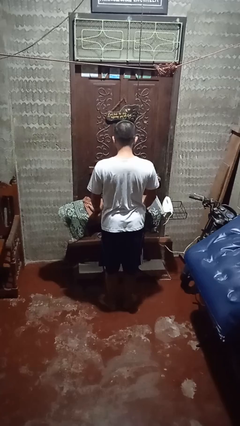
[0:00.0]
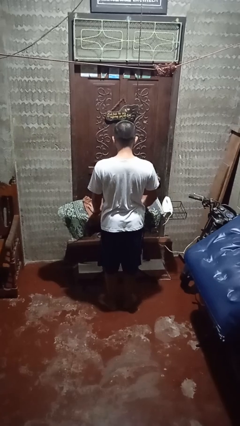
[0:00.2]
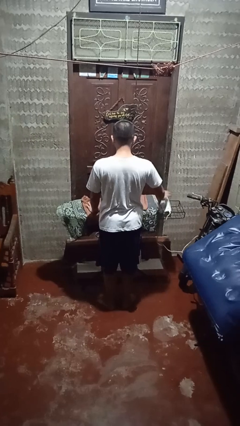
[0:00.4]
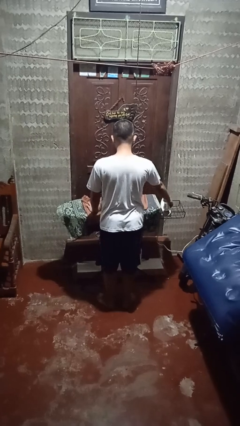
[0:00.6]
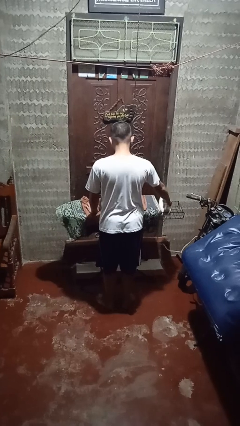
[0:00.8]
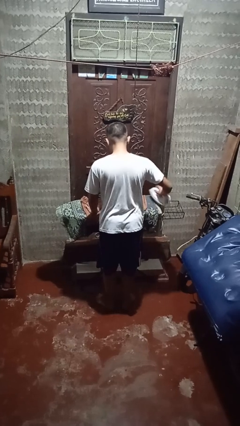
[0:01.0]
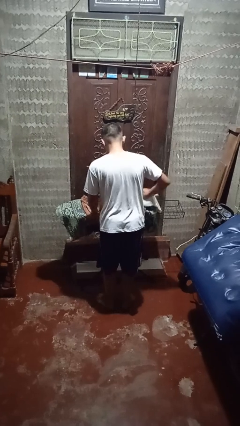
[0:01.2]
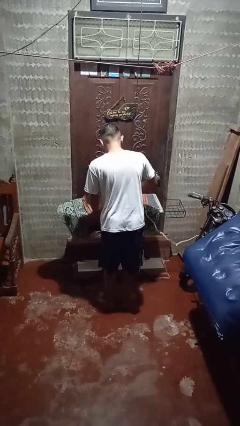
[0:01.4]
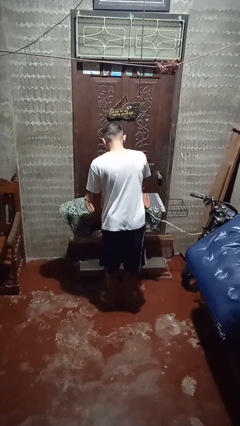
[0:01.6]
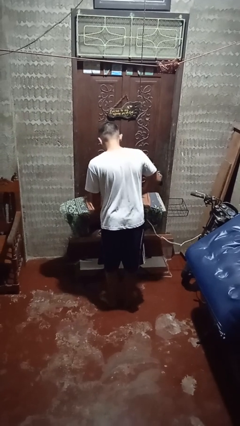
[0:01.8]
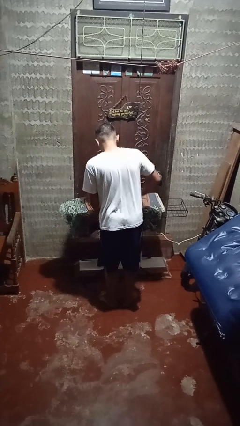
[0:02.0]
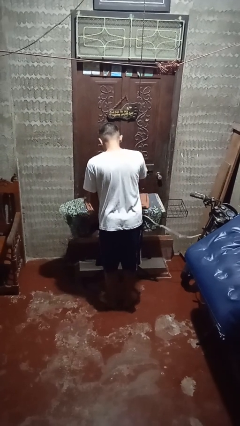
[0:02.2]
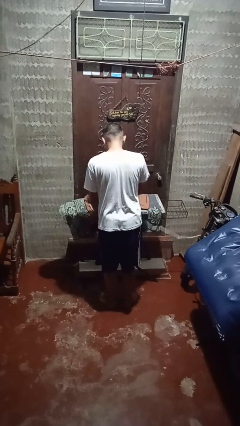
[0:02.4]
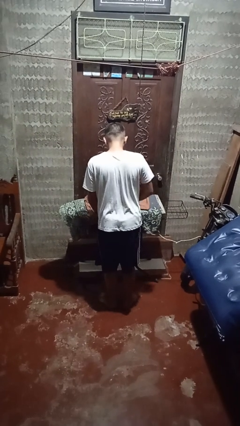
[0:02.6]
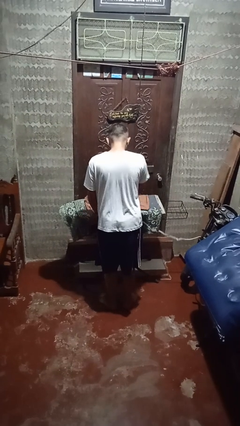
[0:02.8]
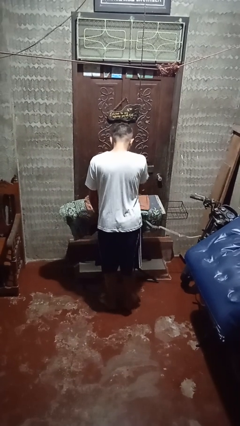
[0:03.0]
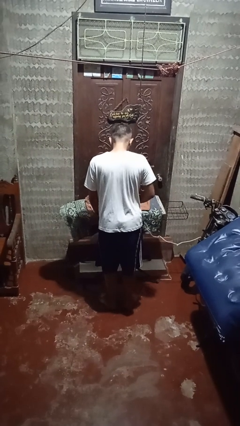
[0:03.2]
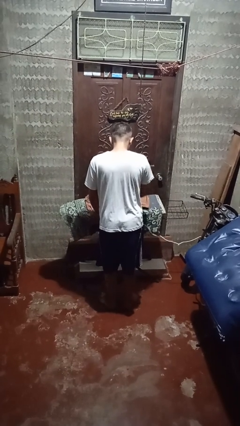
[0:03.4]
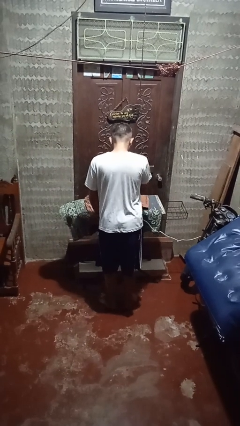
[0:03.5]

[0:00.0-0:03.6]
person irons clothes

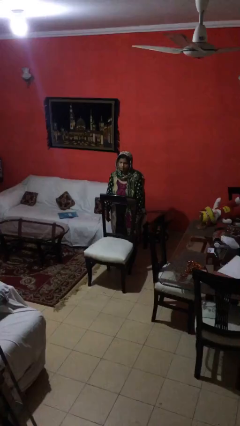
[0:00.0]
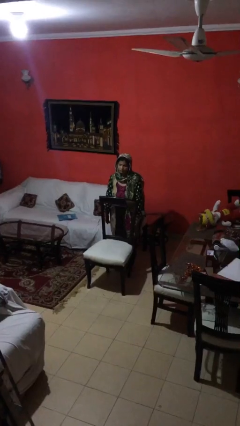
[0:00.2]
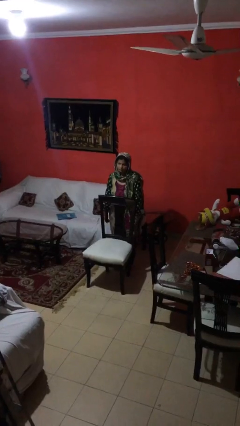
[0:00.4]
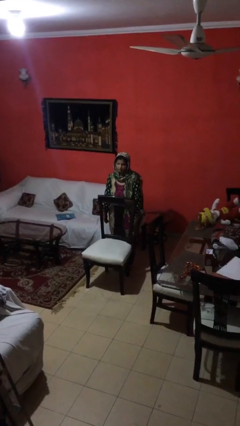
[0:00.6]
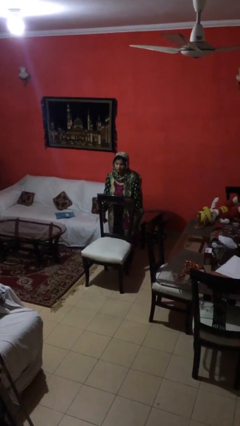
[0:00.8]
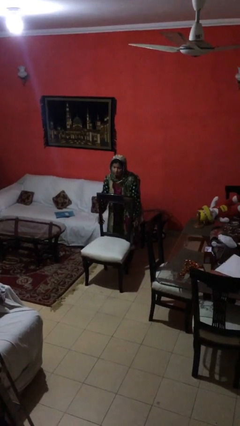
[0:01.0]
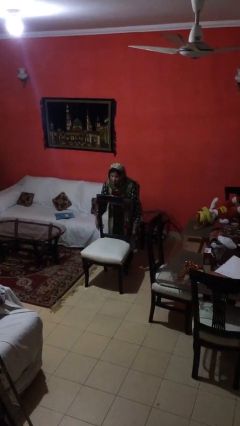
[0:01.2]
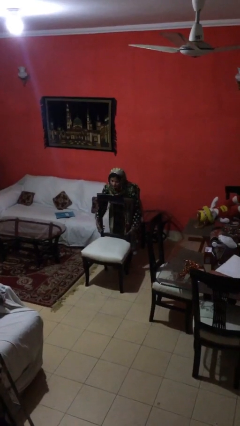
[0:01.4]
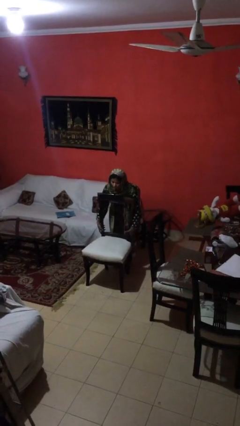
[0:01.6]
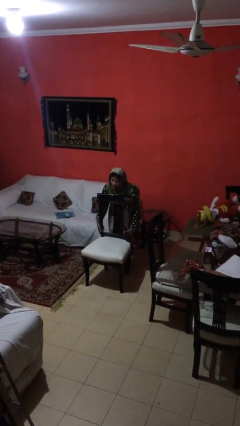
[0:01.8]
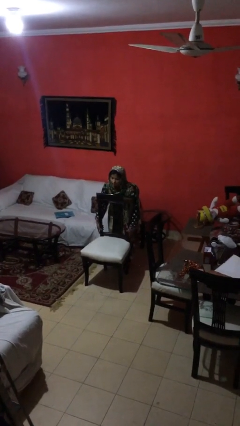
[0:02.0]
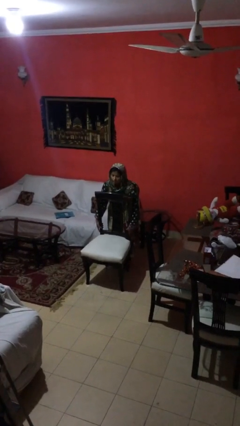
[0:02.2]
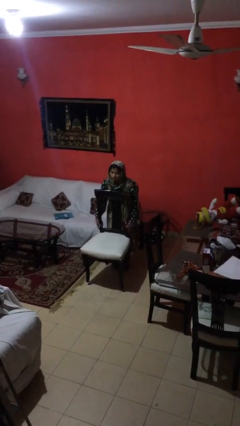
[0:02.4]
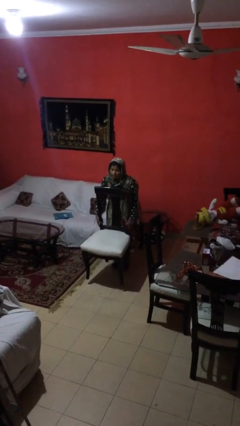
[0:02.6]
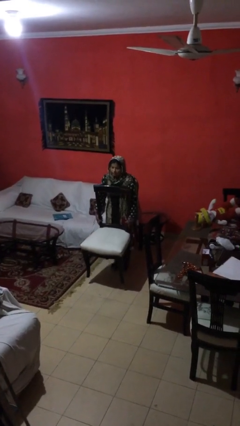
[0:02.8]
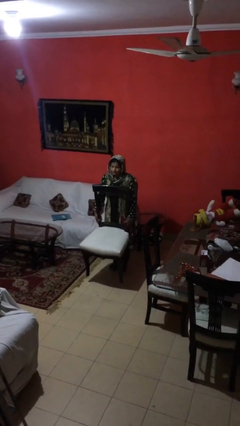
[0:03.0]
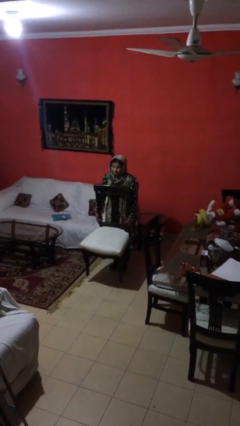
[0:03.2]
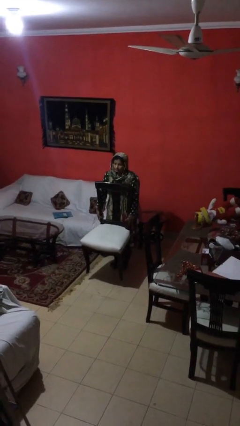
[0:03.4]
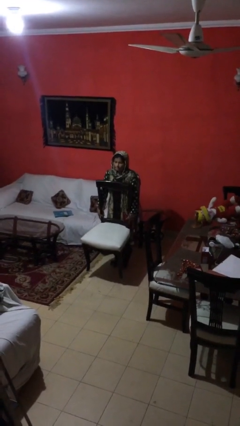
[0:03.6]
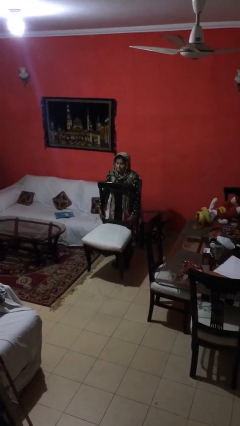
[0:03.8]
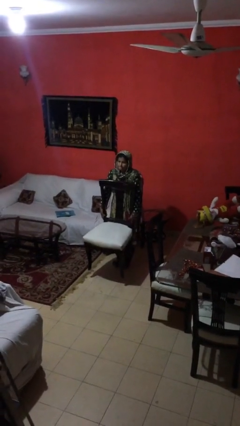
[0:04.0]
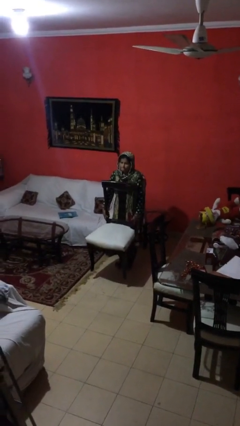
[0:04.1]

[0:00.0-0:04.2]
person picks up object from floor

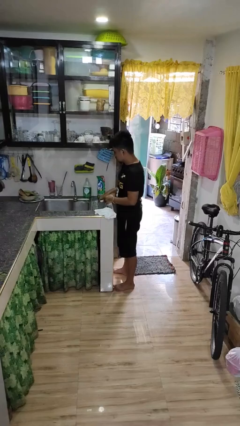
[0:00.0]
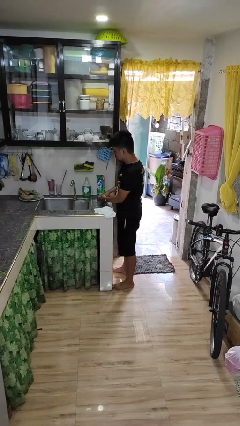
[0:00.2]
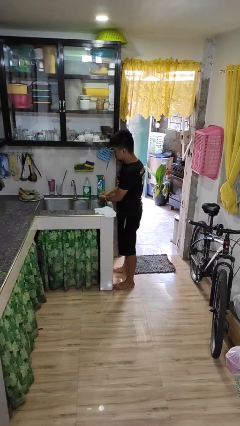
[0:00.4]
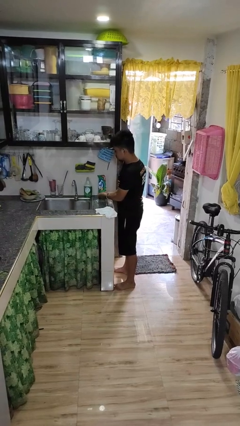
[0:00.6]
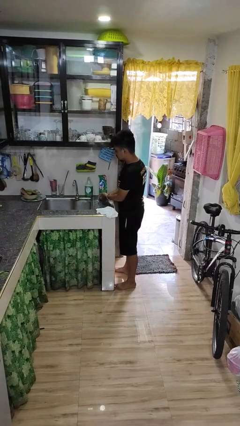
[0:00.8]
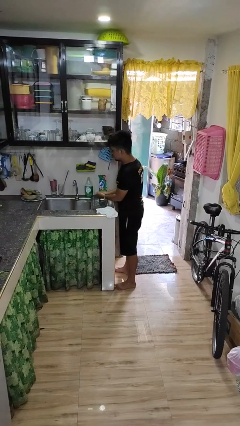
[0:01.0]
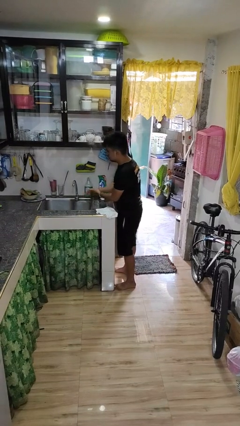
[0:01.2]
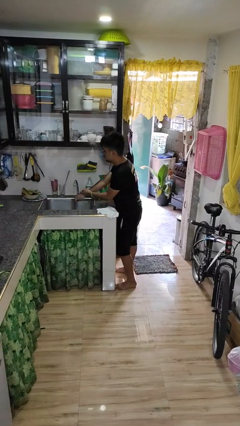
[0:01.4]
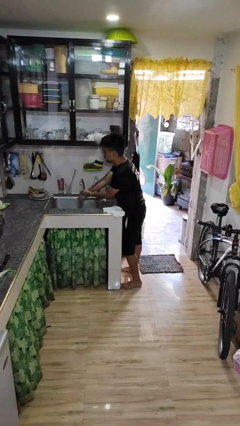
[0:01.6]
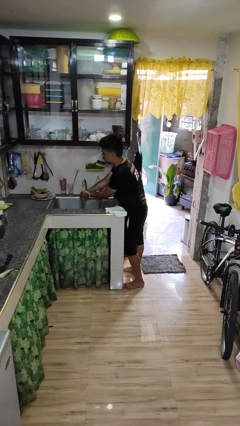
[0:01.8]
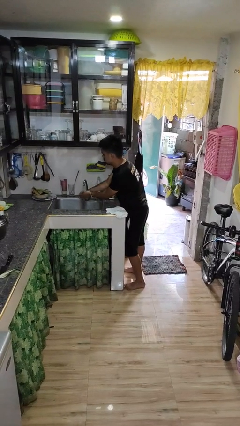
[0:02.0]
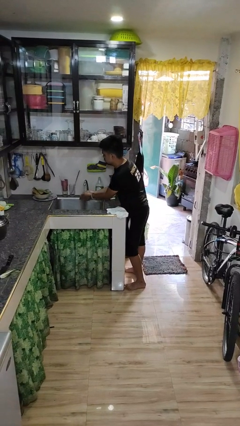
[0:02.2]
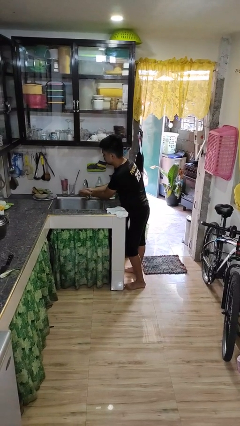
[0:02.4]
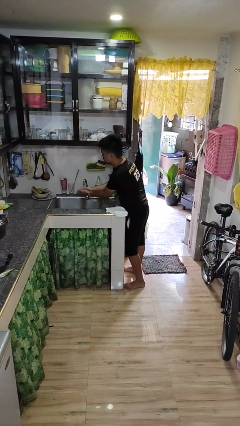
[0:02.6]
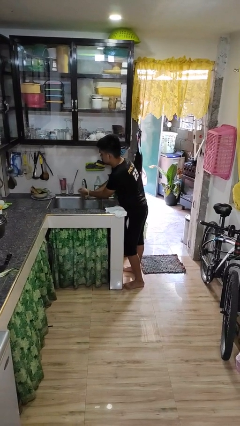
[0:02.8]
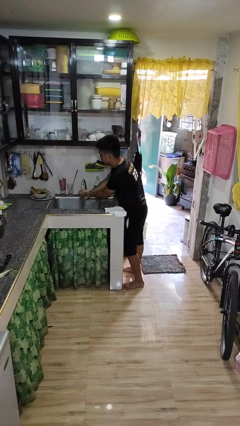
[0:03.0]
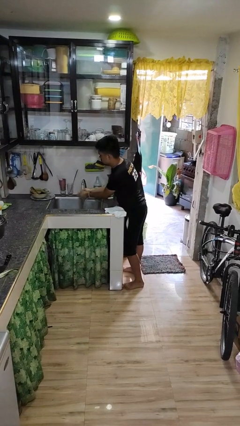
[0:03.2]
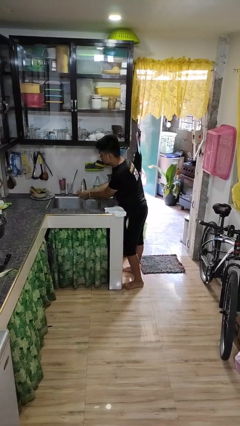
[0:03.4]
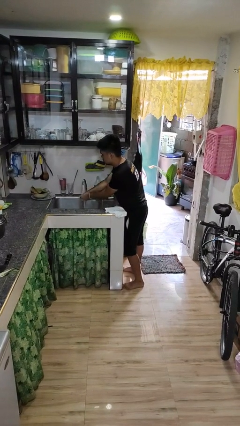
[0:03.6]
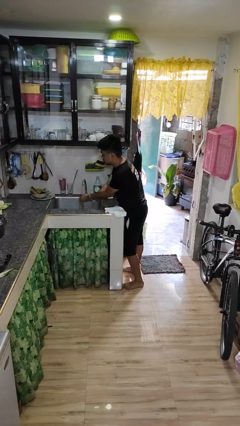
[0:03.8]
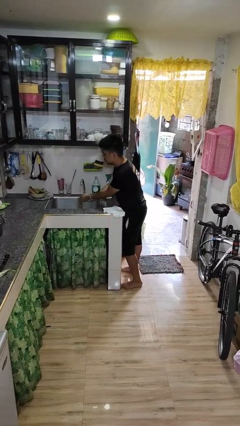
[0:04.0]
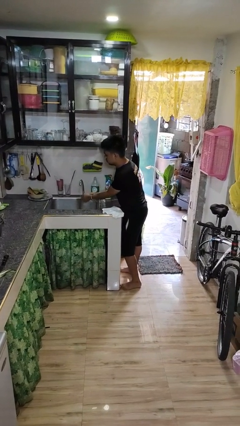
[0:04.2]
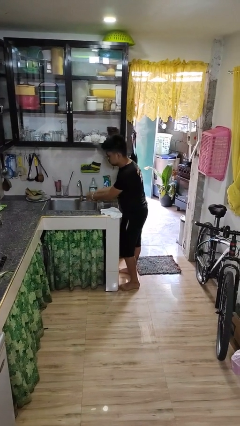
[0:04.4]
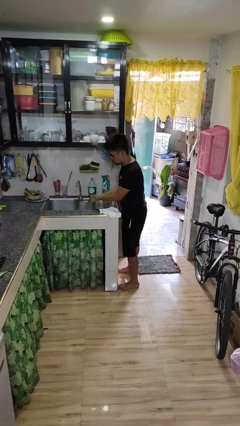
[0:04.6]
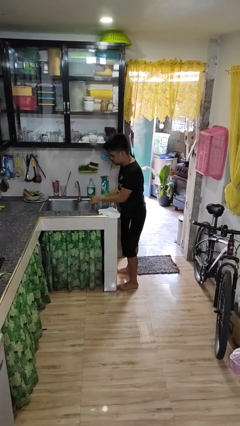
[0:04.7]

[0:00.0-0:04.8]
person washes hands

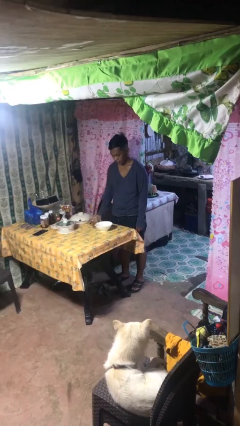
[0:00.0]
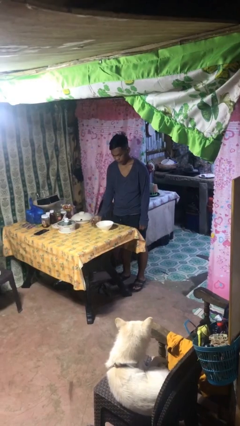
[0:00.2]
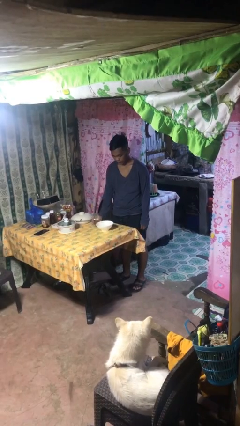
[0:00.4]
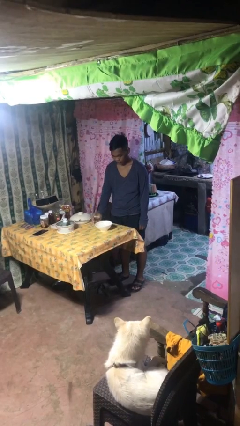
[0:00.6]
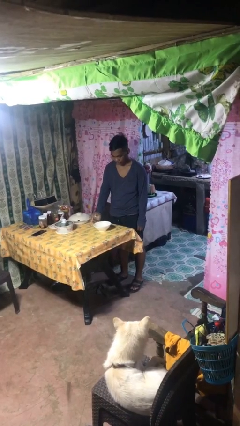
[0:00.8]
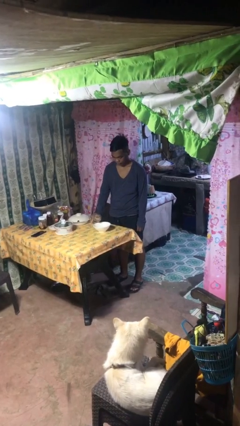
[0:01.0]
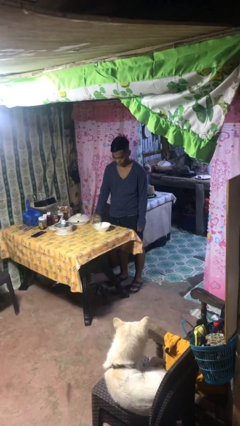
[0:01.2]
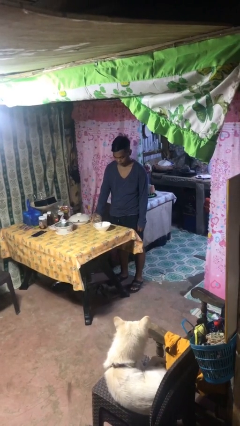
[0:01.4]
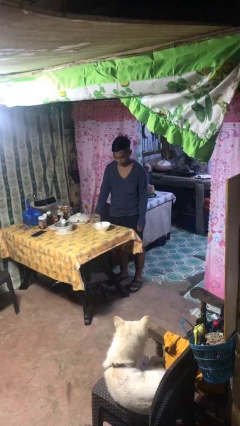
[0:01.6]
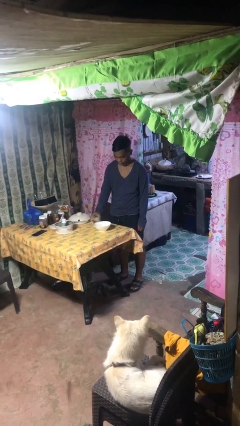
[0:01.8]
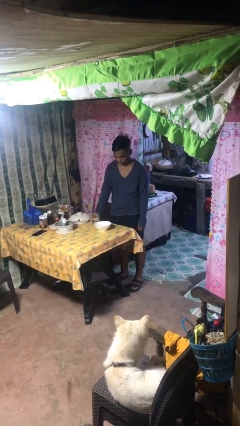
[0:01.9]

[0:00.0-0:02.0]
person pours into bowl

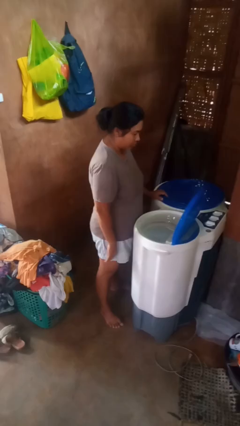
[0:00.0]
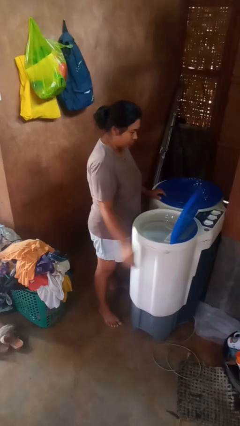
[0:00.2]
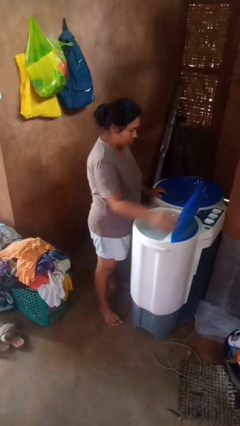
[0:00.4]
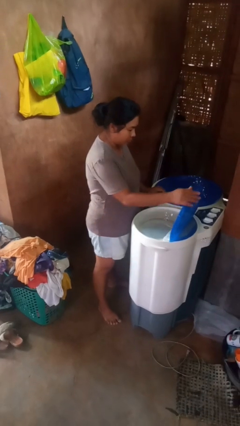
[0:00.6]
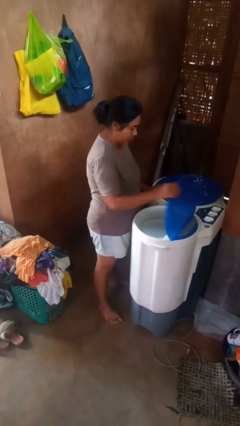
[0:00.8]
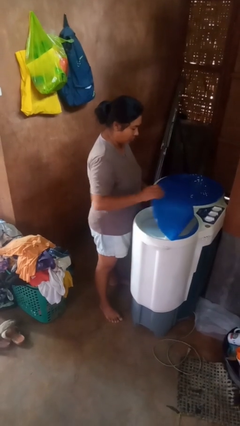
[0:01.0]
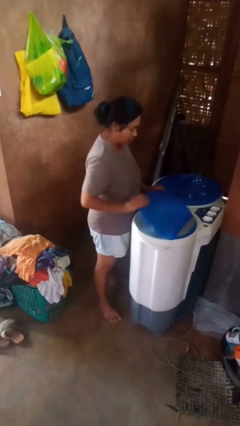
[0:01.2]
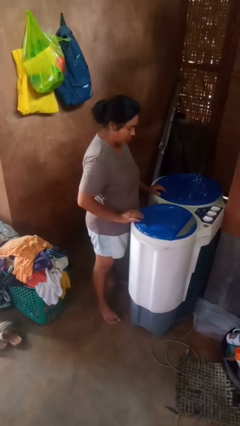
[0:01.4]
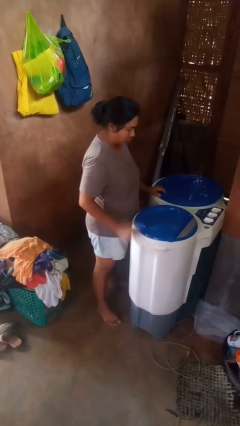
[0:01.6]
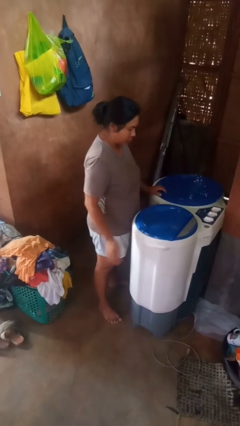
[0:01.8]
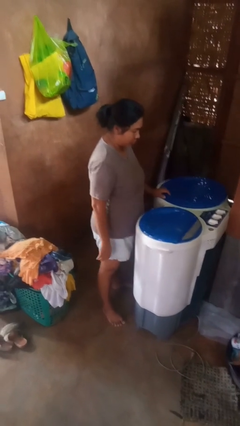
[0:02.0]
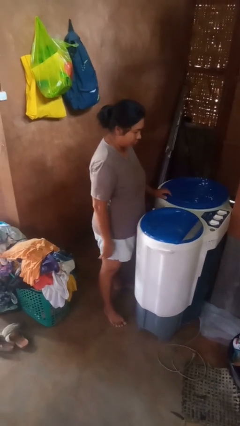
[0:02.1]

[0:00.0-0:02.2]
person closes clothes washer

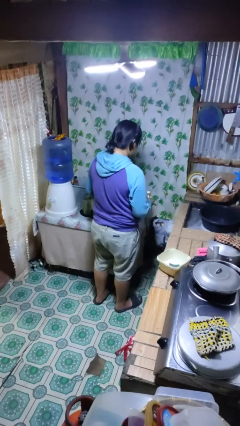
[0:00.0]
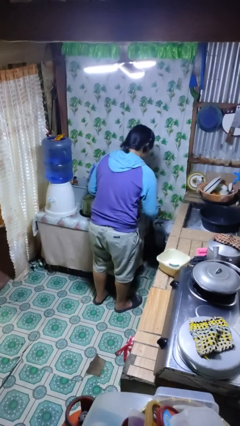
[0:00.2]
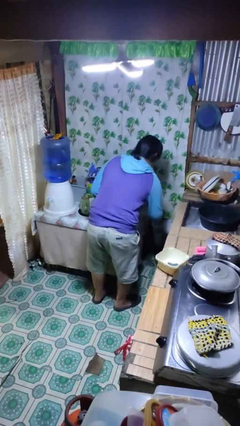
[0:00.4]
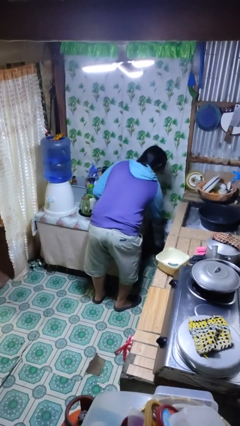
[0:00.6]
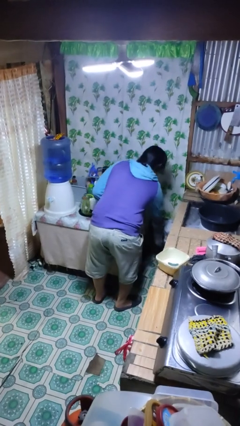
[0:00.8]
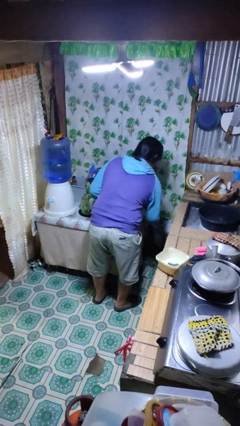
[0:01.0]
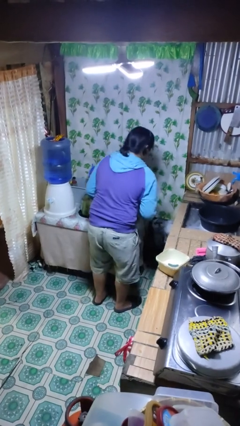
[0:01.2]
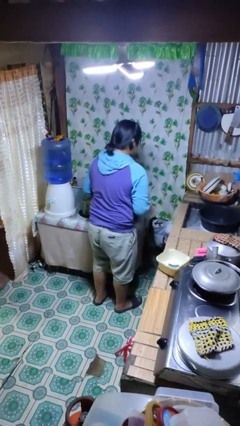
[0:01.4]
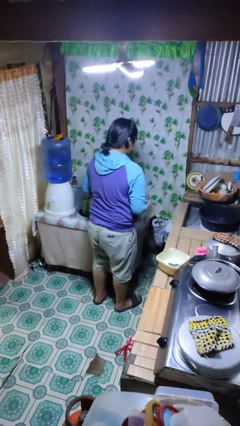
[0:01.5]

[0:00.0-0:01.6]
person discards trash
